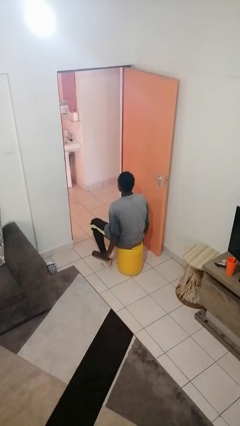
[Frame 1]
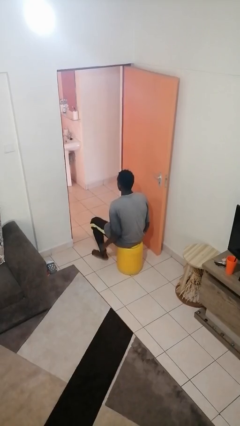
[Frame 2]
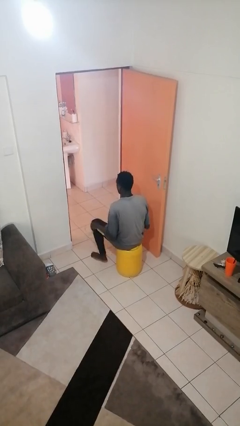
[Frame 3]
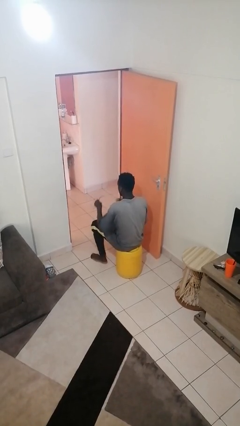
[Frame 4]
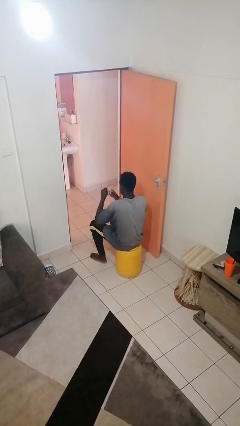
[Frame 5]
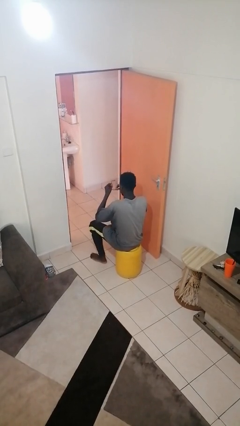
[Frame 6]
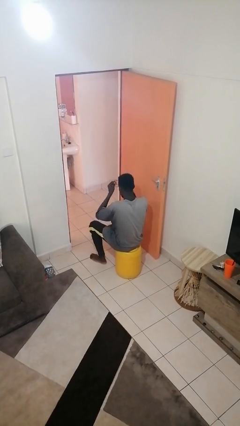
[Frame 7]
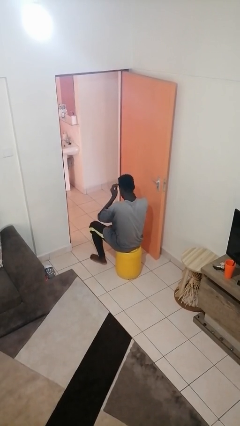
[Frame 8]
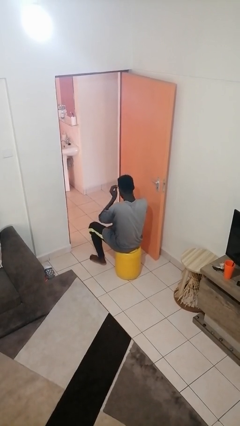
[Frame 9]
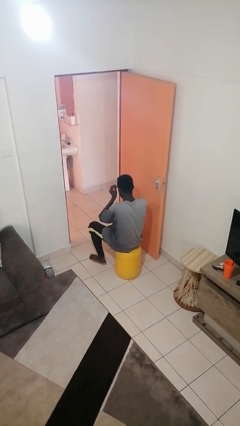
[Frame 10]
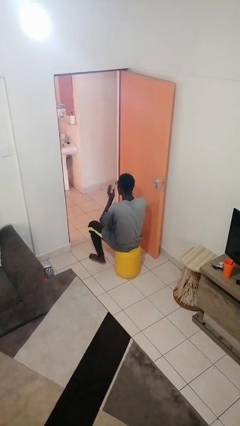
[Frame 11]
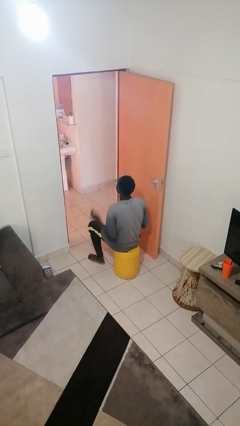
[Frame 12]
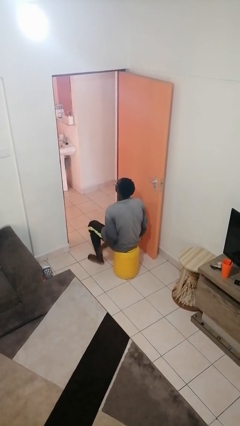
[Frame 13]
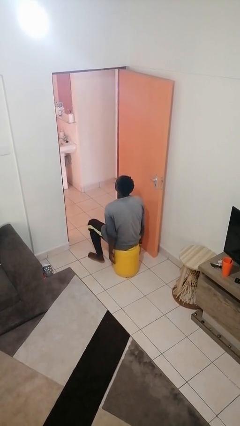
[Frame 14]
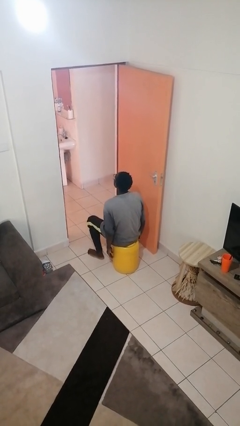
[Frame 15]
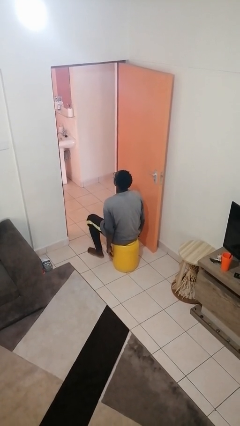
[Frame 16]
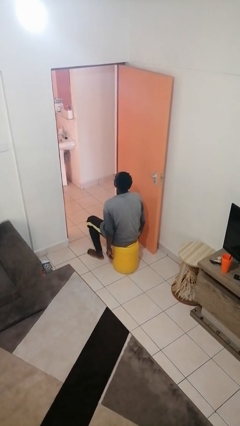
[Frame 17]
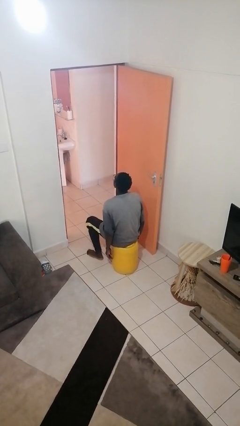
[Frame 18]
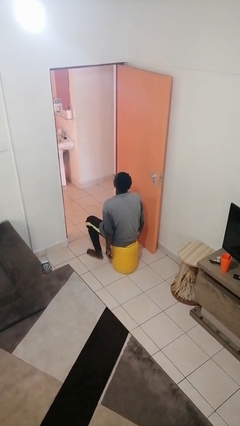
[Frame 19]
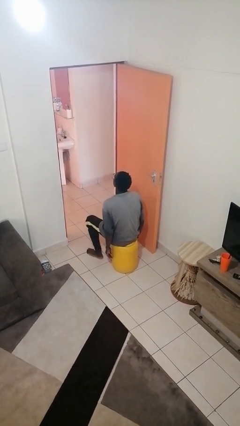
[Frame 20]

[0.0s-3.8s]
person puts on glasses

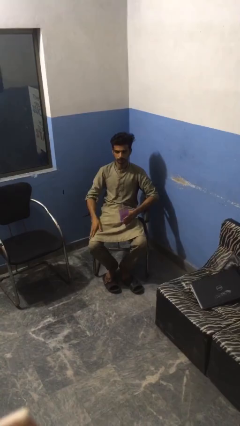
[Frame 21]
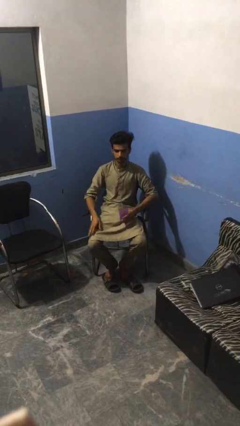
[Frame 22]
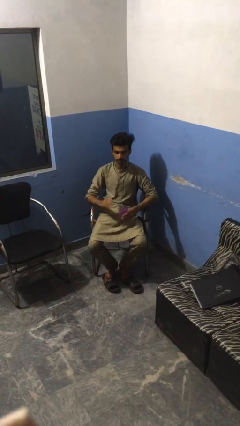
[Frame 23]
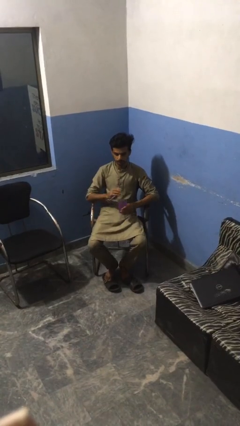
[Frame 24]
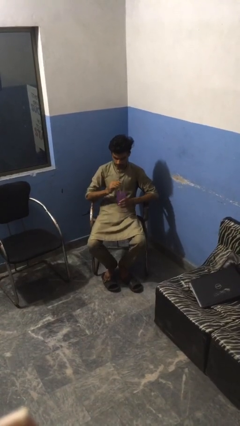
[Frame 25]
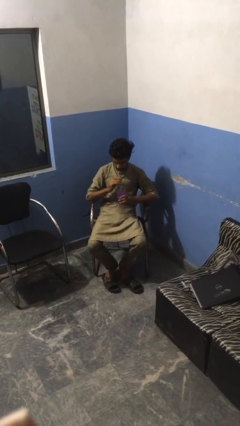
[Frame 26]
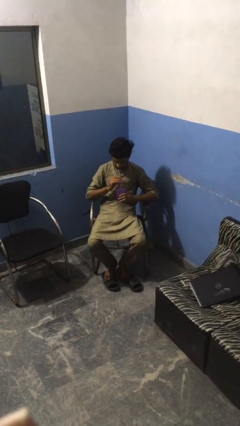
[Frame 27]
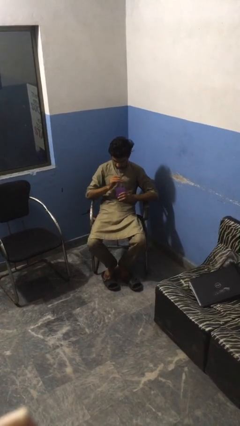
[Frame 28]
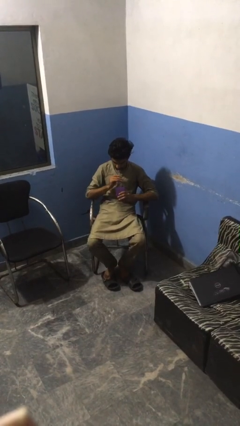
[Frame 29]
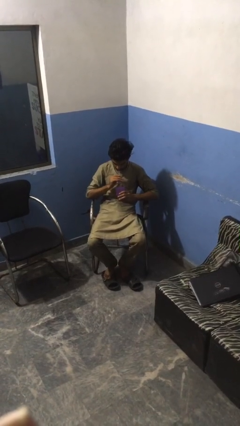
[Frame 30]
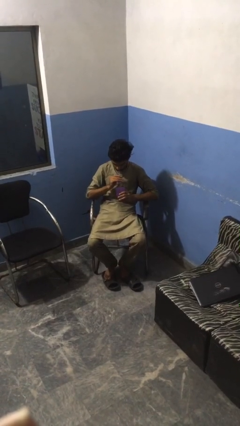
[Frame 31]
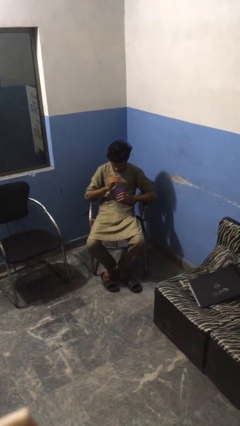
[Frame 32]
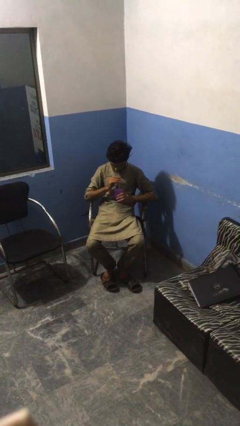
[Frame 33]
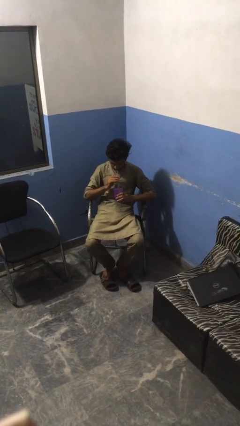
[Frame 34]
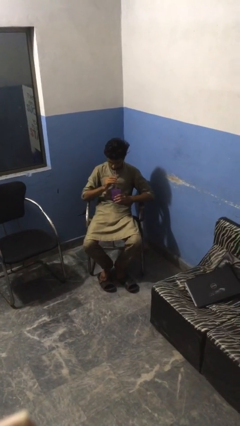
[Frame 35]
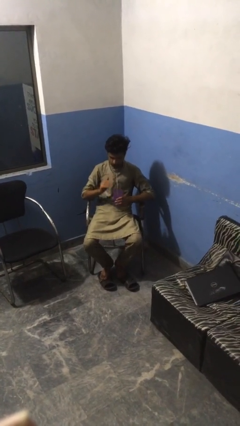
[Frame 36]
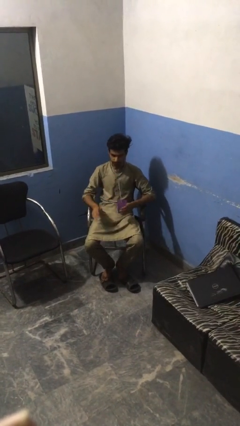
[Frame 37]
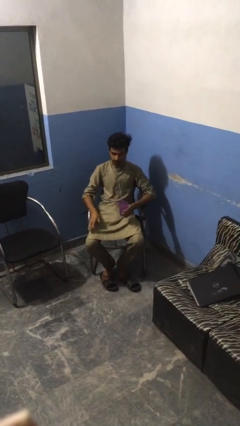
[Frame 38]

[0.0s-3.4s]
person drinks from straw

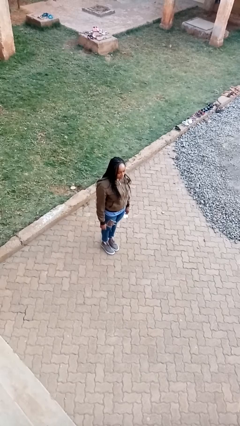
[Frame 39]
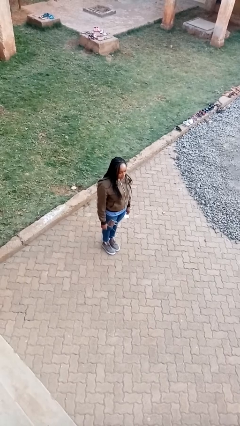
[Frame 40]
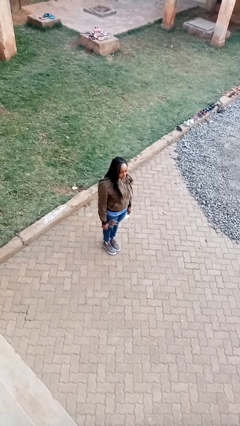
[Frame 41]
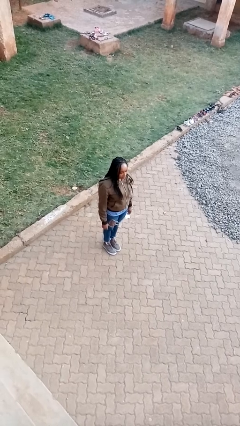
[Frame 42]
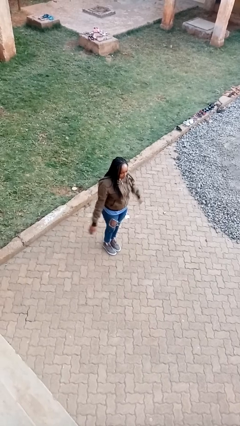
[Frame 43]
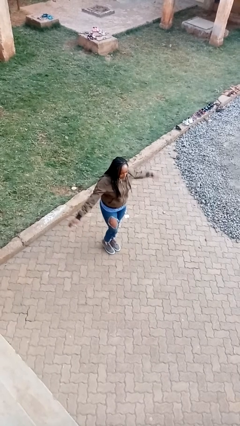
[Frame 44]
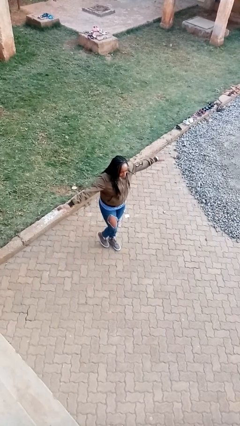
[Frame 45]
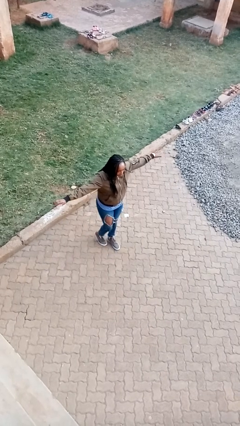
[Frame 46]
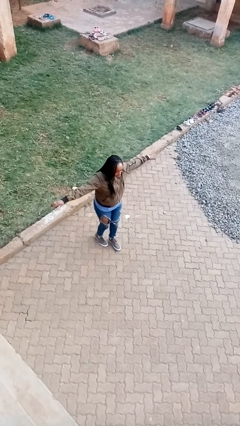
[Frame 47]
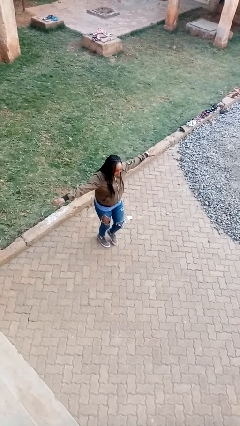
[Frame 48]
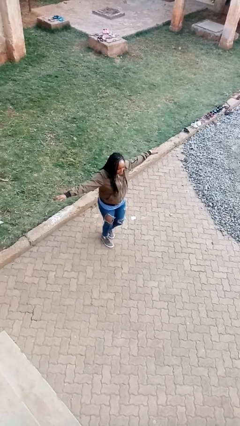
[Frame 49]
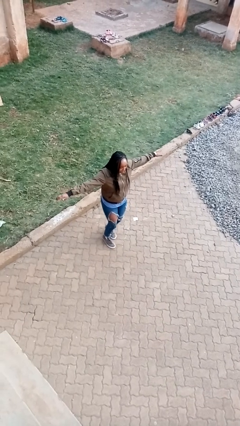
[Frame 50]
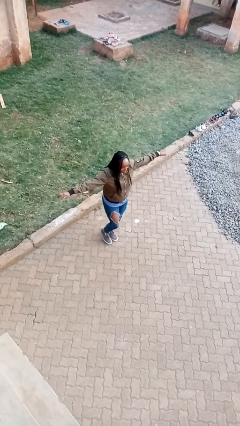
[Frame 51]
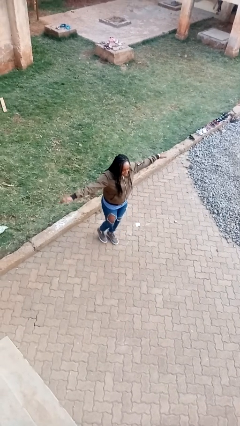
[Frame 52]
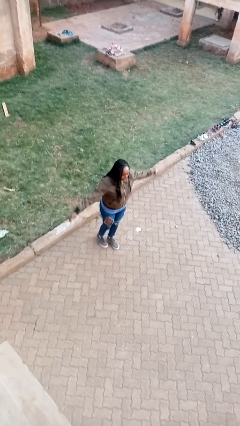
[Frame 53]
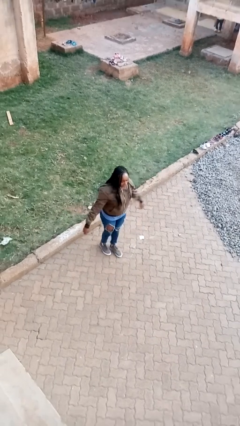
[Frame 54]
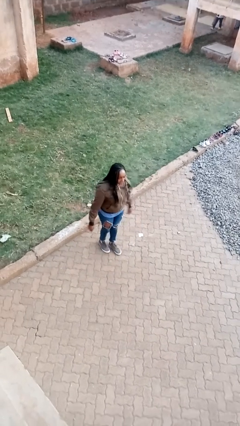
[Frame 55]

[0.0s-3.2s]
person walks tiptoe

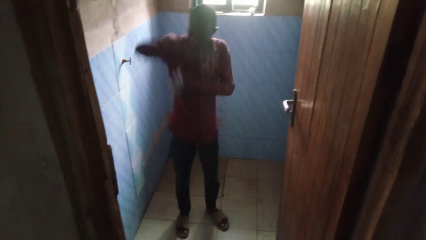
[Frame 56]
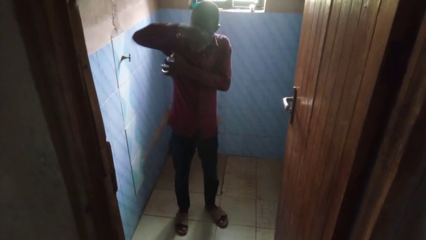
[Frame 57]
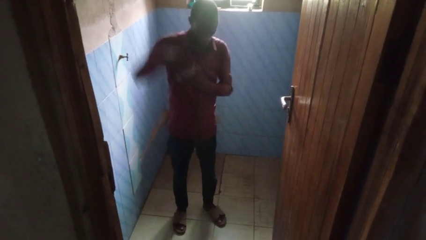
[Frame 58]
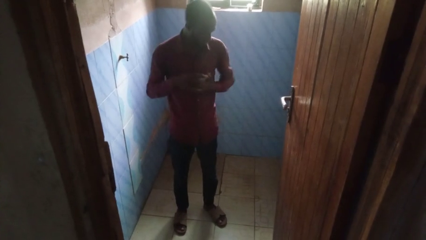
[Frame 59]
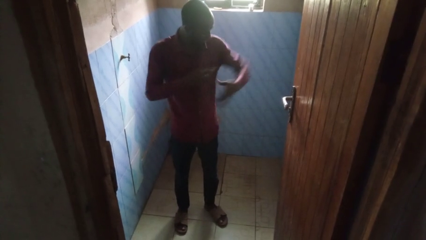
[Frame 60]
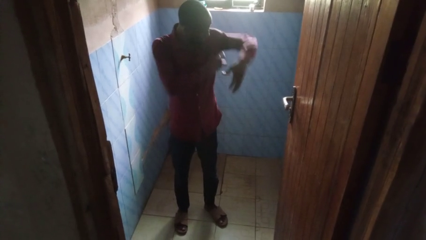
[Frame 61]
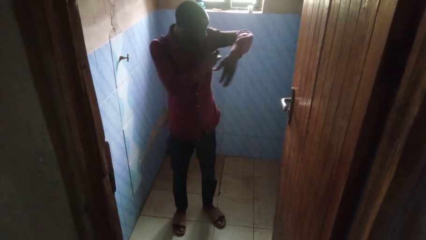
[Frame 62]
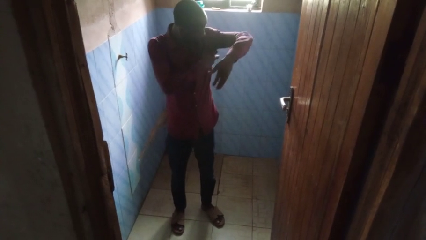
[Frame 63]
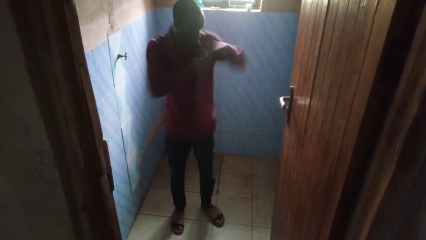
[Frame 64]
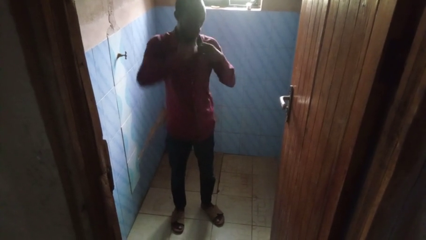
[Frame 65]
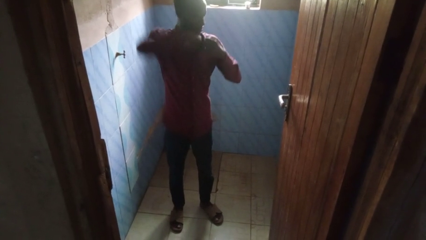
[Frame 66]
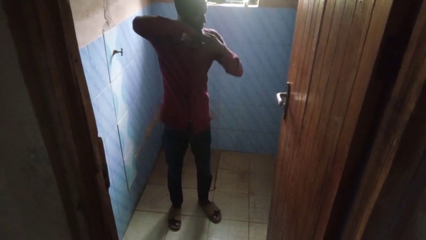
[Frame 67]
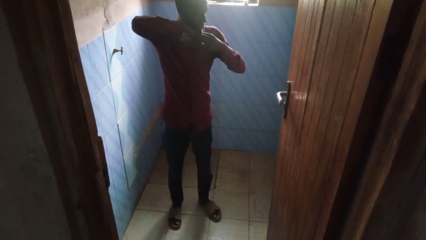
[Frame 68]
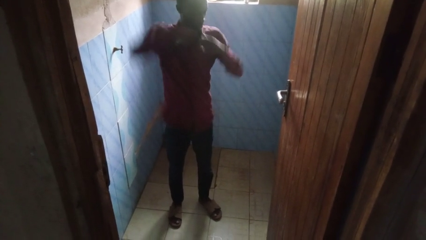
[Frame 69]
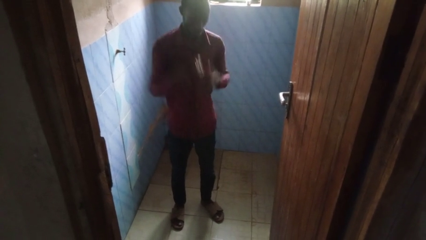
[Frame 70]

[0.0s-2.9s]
person applies deodorant

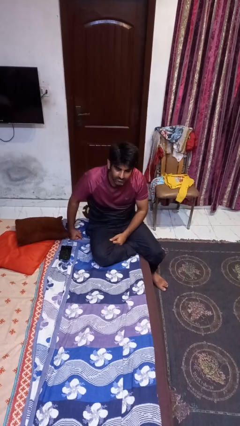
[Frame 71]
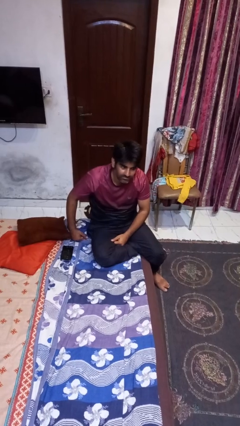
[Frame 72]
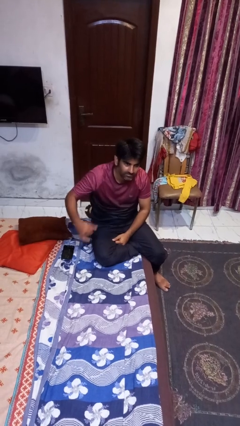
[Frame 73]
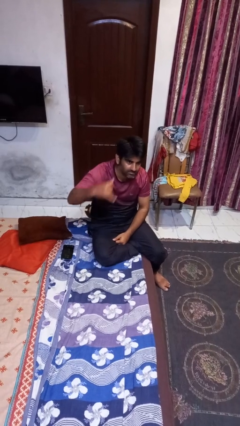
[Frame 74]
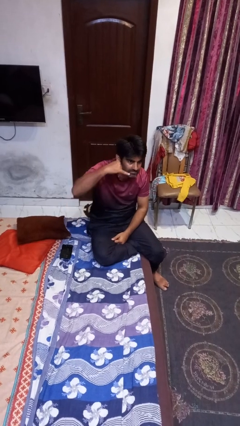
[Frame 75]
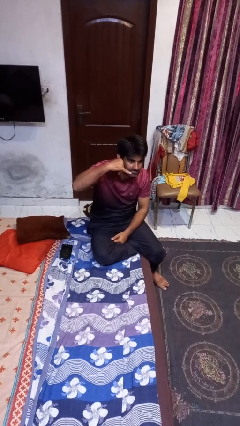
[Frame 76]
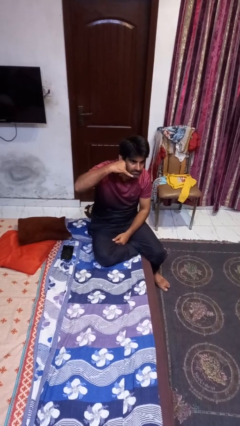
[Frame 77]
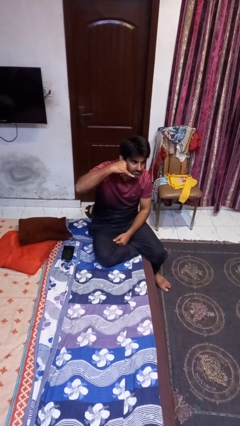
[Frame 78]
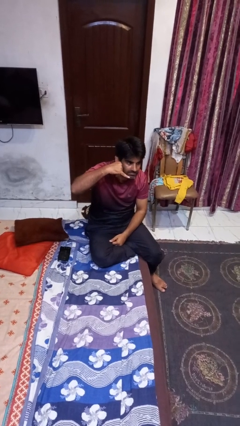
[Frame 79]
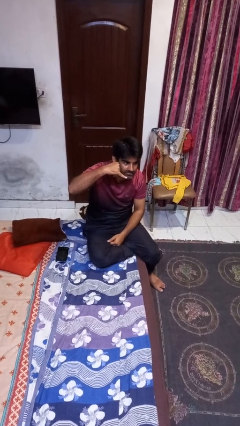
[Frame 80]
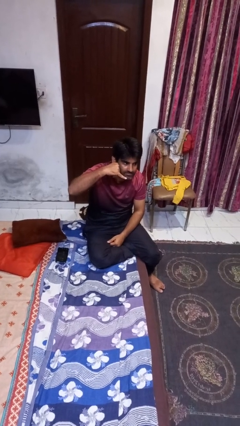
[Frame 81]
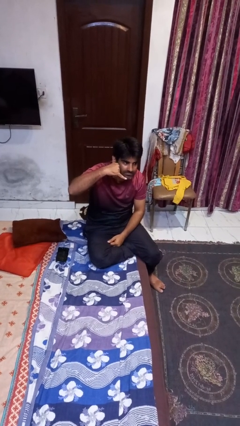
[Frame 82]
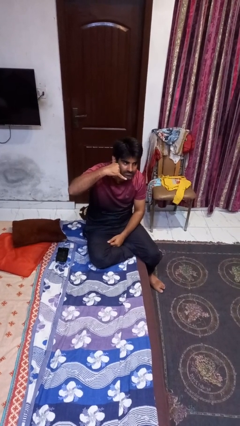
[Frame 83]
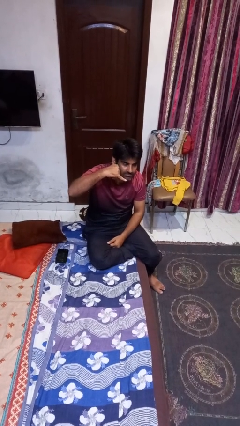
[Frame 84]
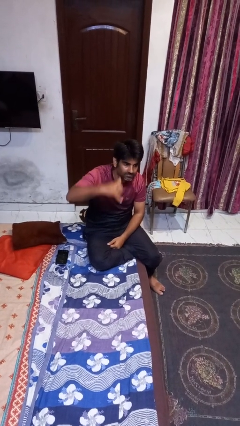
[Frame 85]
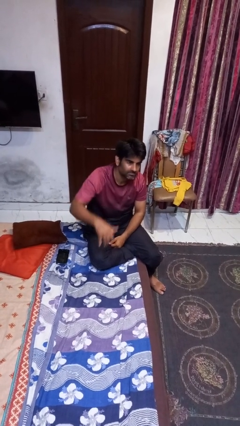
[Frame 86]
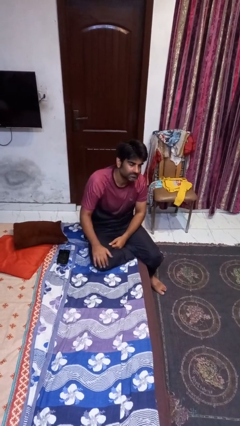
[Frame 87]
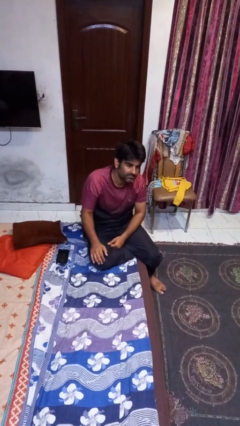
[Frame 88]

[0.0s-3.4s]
person gestures call me

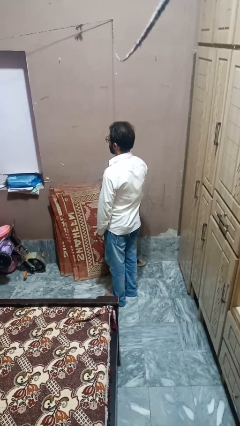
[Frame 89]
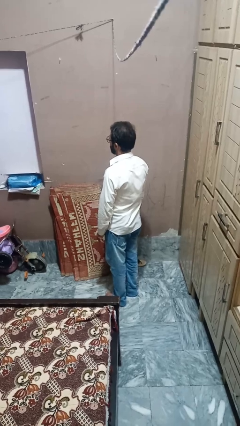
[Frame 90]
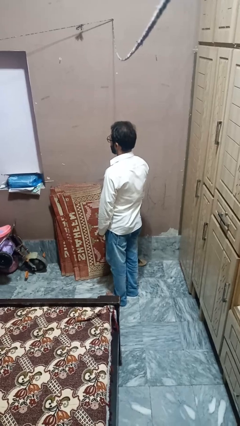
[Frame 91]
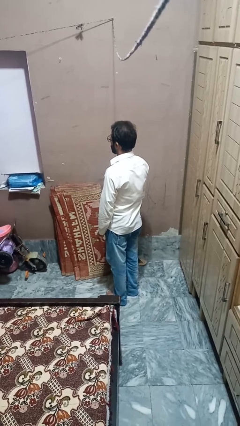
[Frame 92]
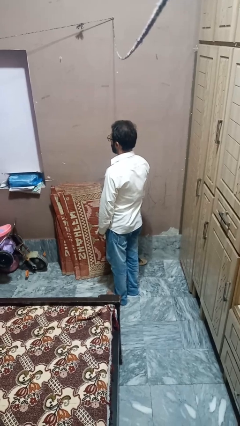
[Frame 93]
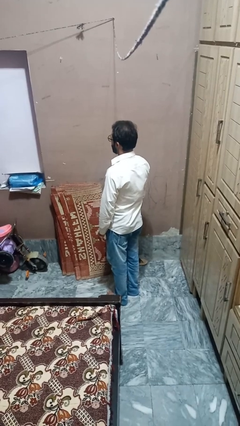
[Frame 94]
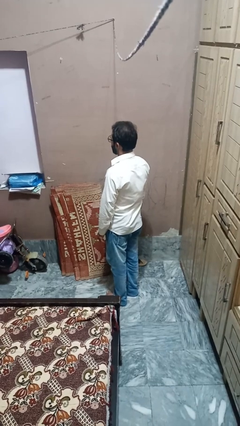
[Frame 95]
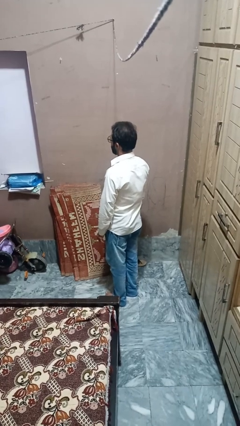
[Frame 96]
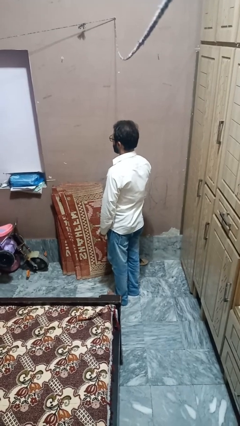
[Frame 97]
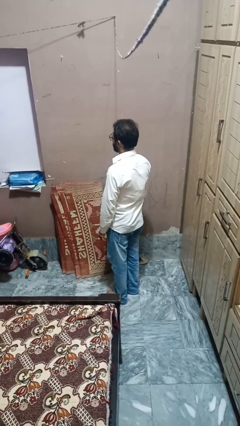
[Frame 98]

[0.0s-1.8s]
person brushes hair
